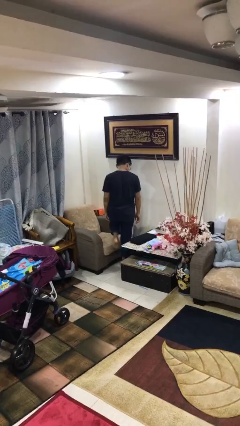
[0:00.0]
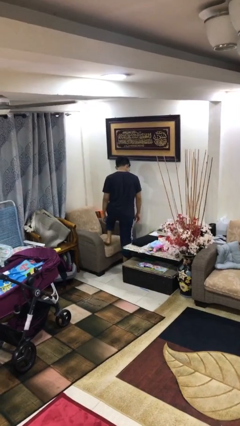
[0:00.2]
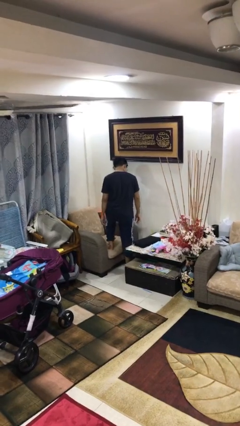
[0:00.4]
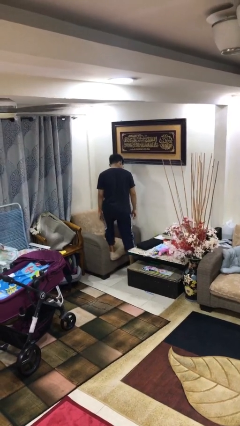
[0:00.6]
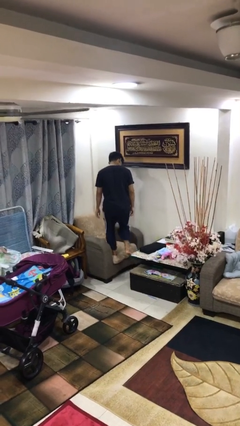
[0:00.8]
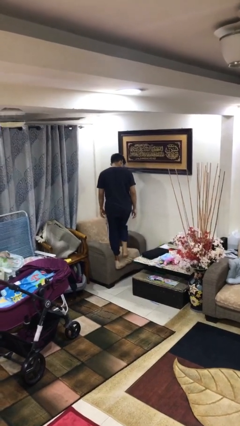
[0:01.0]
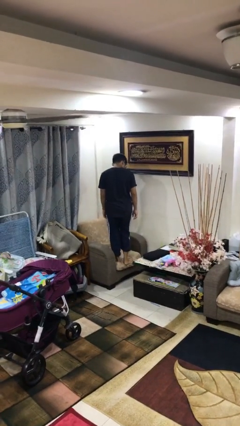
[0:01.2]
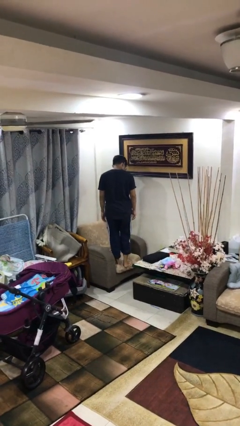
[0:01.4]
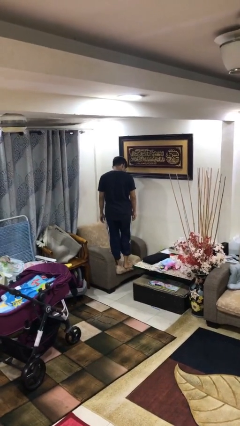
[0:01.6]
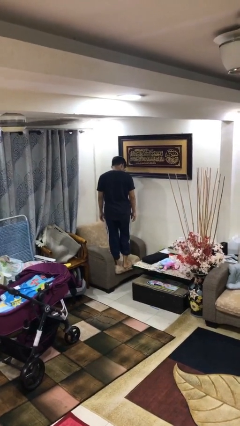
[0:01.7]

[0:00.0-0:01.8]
person climbs on couch

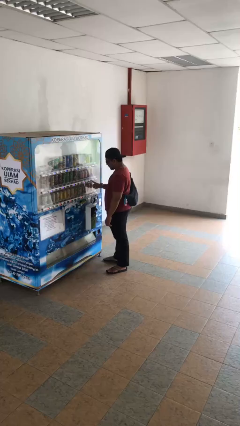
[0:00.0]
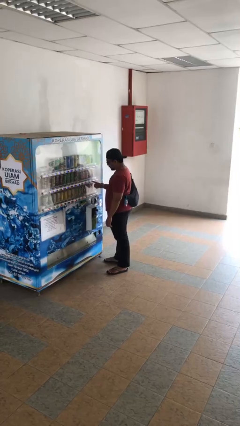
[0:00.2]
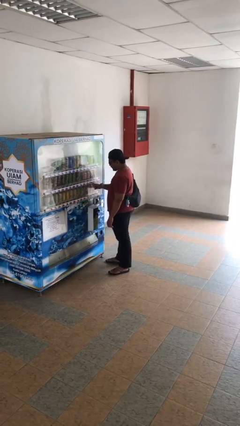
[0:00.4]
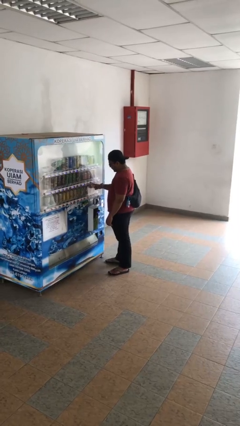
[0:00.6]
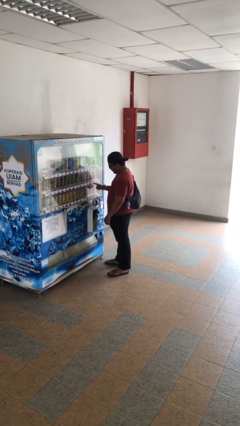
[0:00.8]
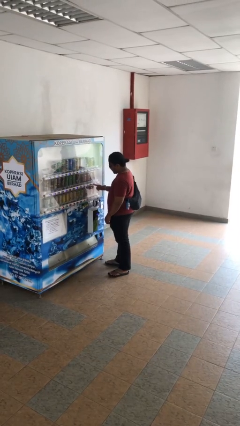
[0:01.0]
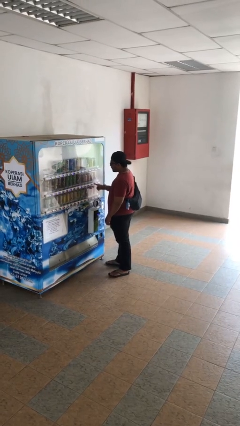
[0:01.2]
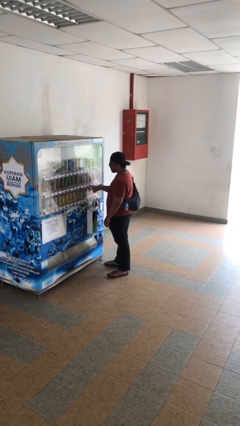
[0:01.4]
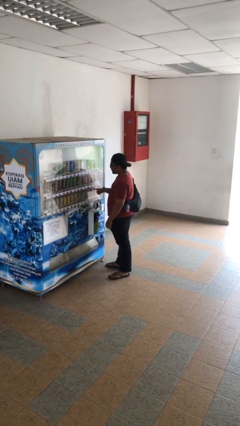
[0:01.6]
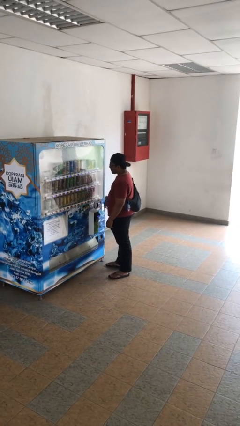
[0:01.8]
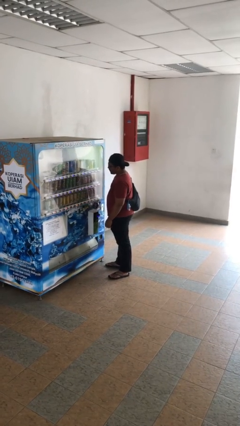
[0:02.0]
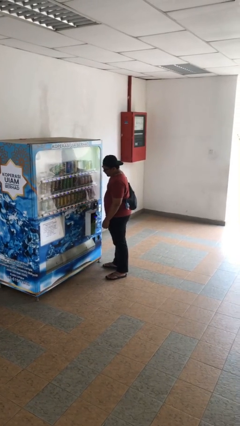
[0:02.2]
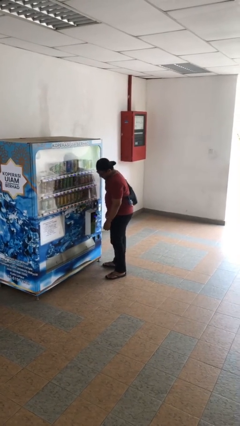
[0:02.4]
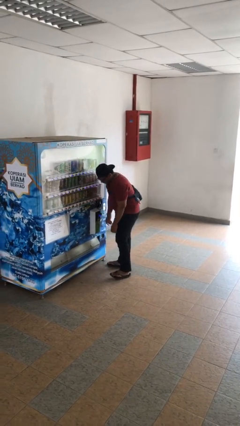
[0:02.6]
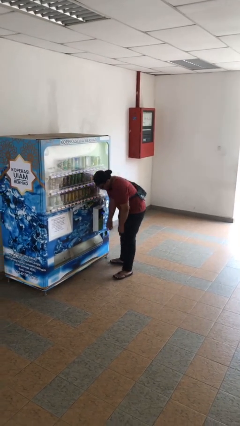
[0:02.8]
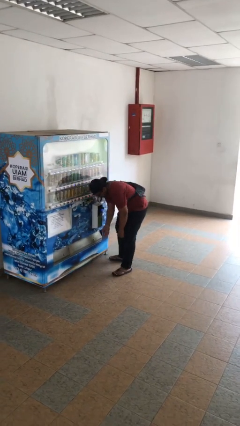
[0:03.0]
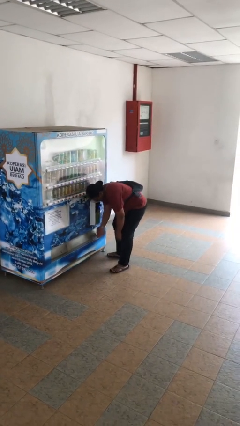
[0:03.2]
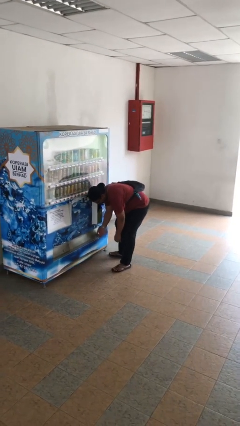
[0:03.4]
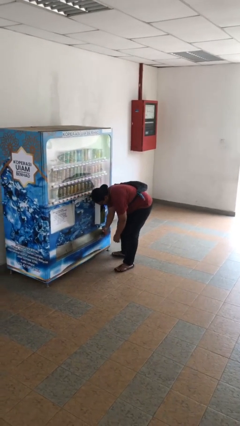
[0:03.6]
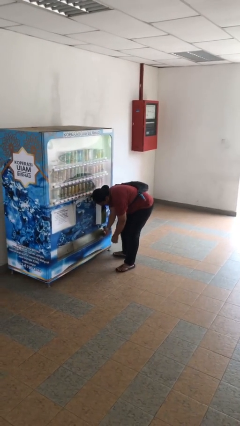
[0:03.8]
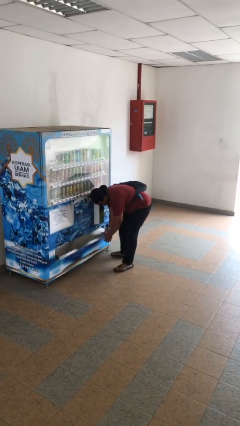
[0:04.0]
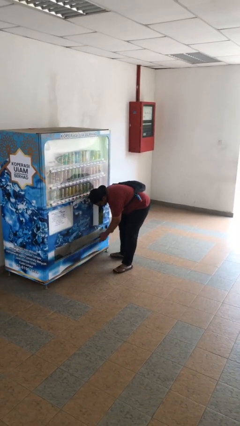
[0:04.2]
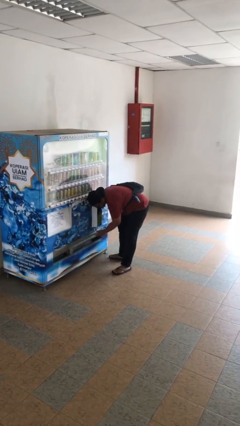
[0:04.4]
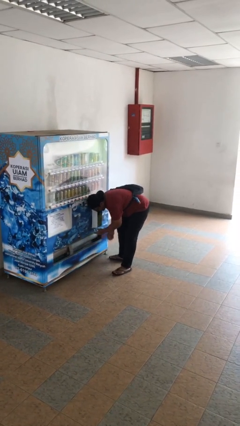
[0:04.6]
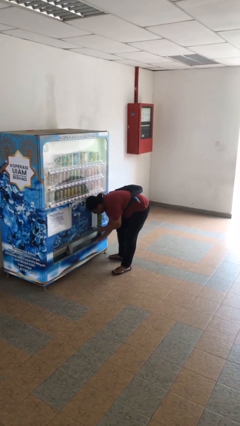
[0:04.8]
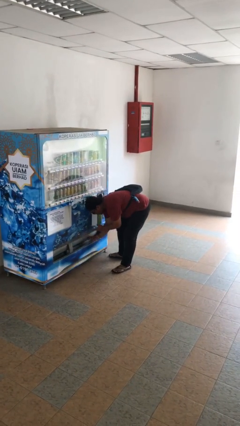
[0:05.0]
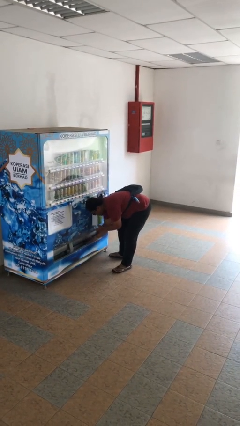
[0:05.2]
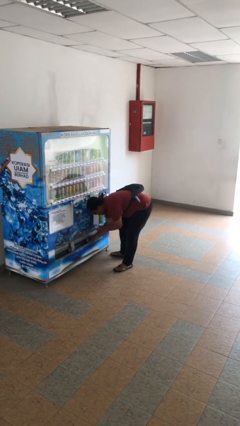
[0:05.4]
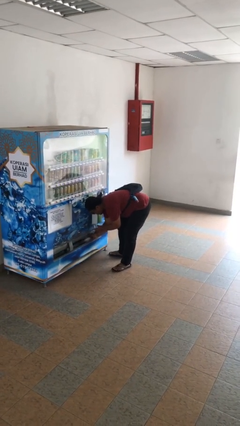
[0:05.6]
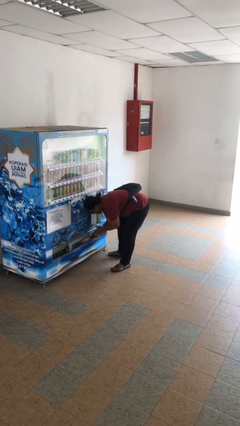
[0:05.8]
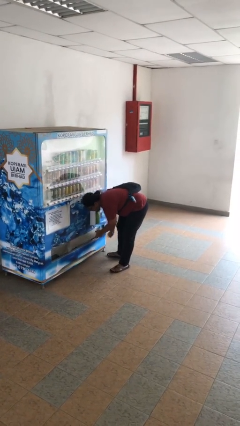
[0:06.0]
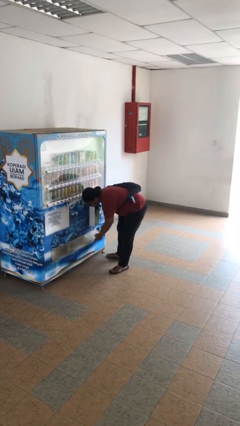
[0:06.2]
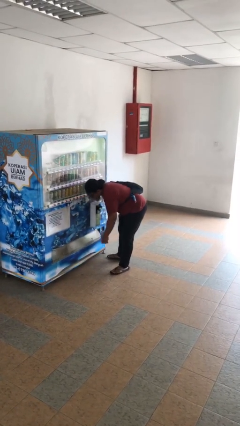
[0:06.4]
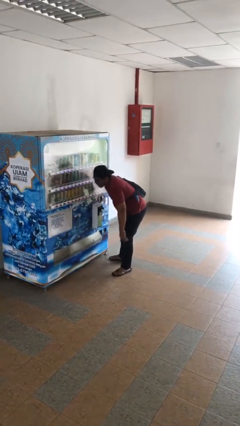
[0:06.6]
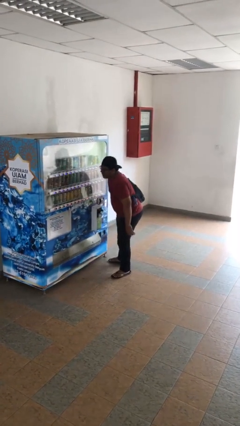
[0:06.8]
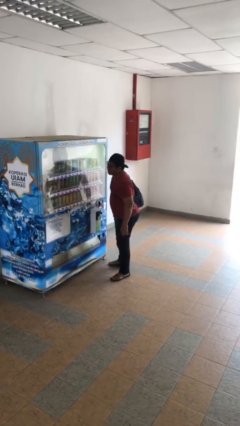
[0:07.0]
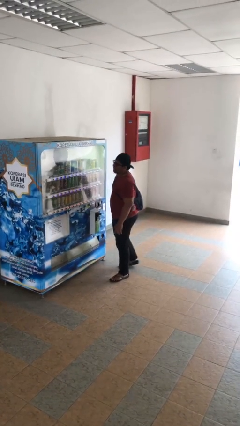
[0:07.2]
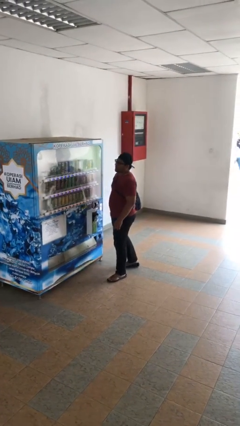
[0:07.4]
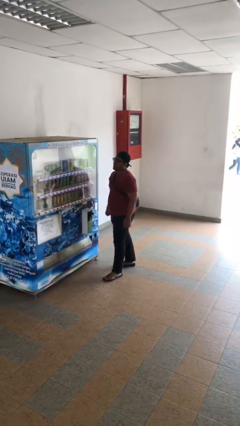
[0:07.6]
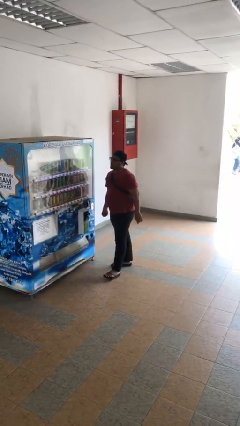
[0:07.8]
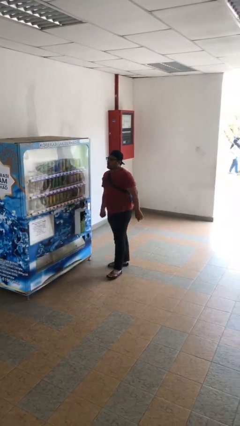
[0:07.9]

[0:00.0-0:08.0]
person purchases from machine

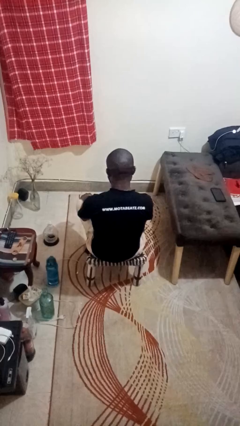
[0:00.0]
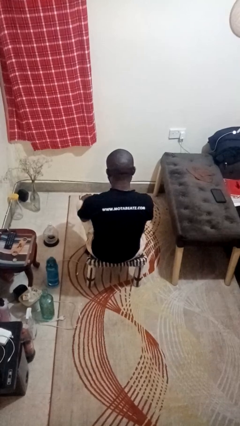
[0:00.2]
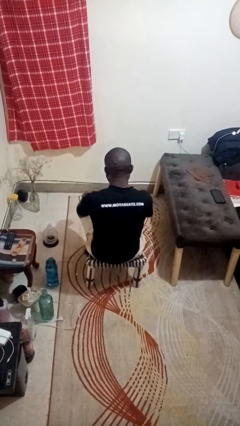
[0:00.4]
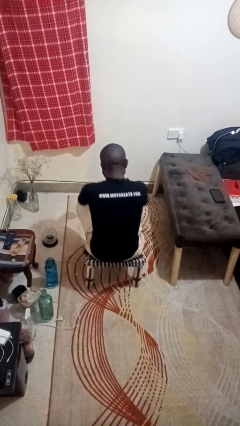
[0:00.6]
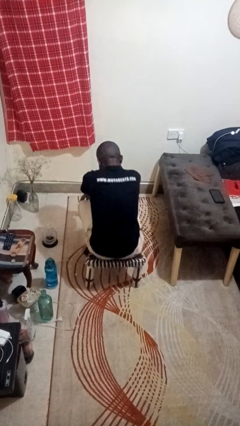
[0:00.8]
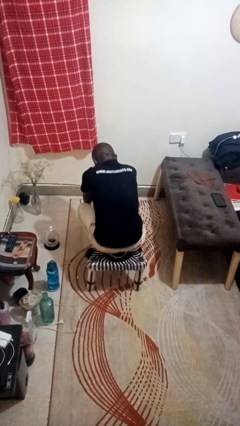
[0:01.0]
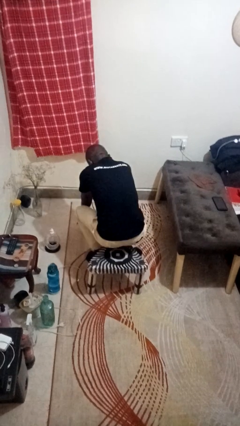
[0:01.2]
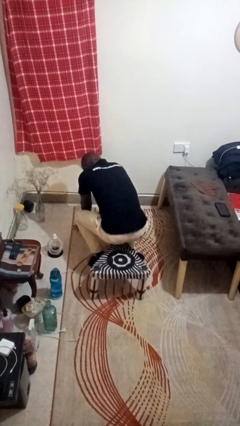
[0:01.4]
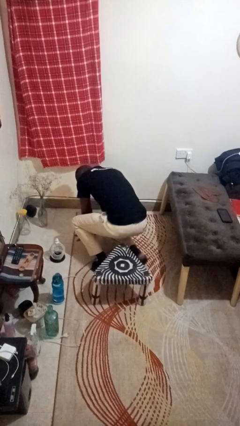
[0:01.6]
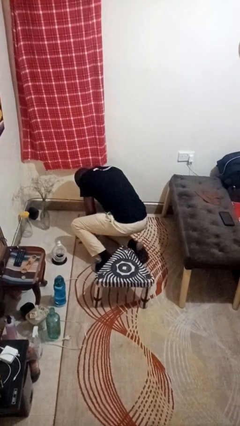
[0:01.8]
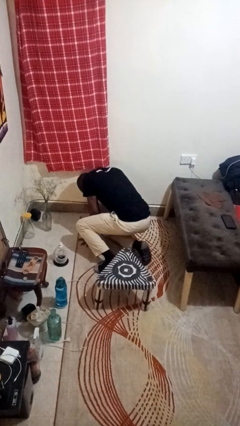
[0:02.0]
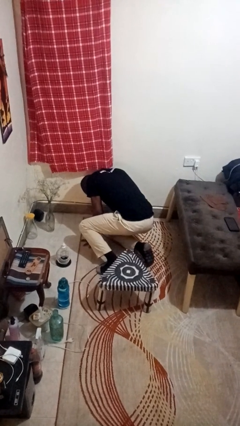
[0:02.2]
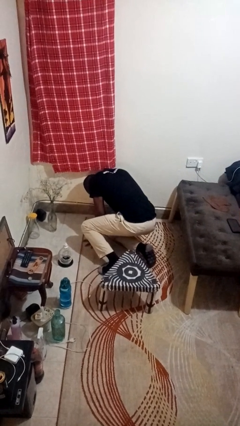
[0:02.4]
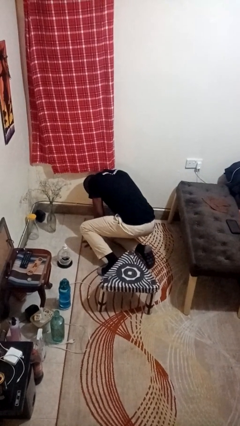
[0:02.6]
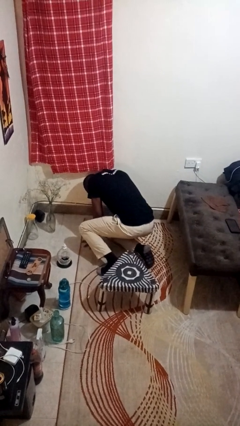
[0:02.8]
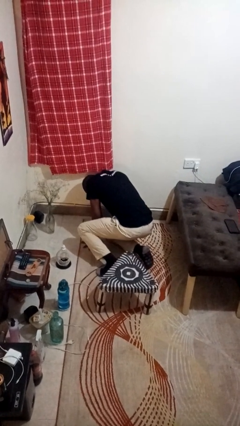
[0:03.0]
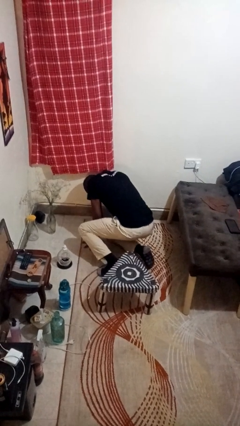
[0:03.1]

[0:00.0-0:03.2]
person falls from chair

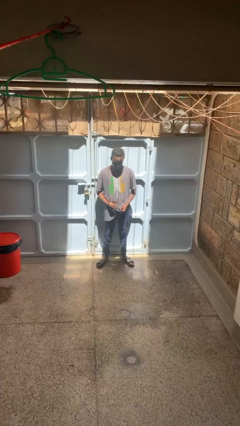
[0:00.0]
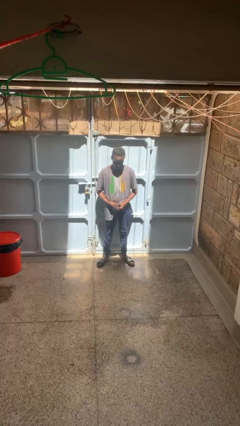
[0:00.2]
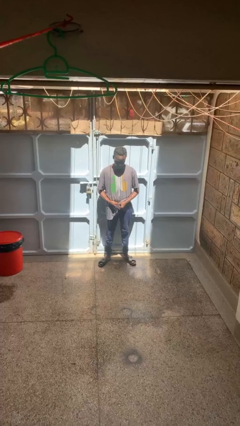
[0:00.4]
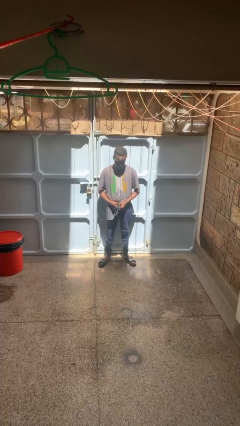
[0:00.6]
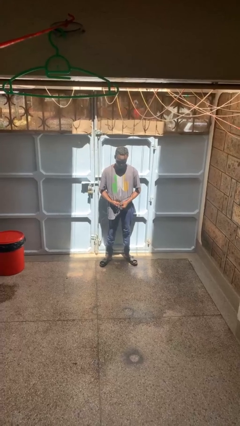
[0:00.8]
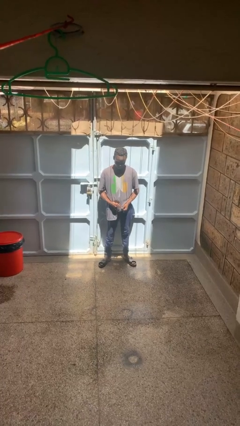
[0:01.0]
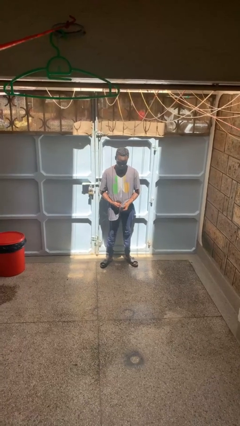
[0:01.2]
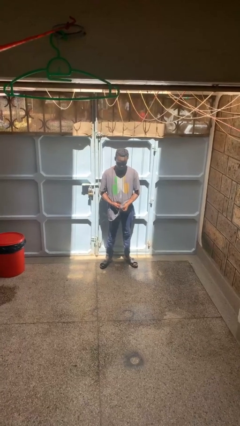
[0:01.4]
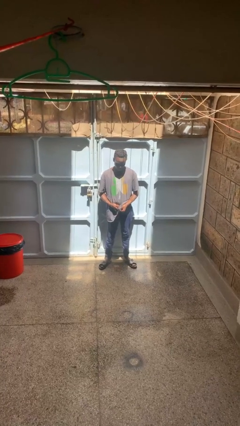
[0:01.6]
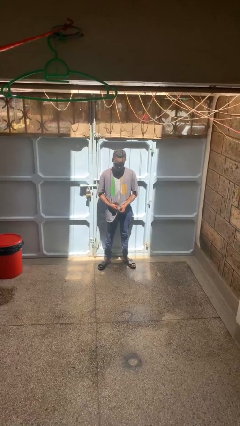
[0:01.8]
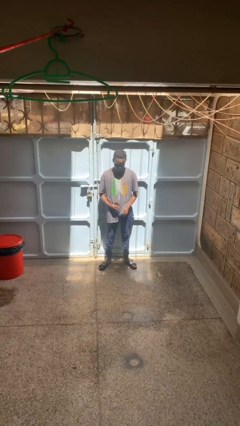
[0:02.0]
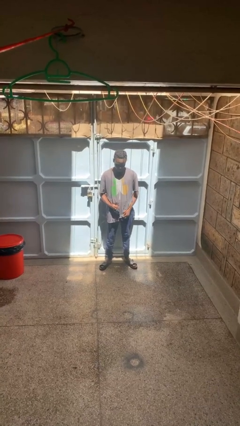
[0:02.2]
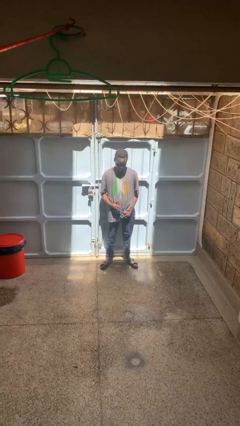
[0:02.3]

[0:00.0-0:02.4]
person cleans eyeglasses

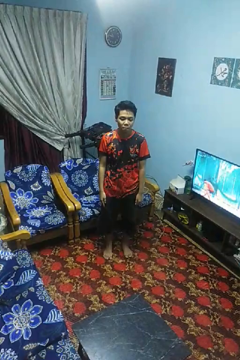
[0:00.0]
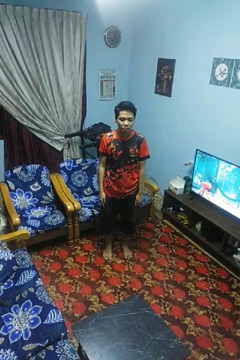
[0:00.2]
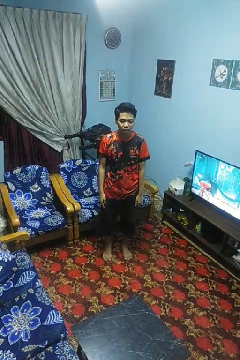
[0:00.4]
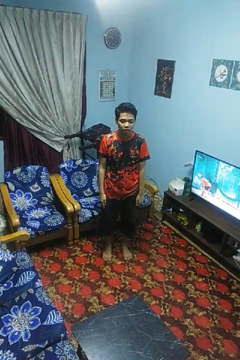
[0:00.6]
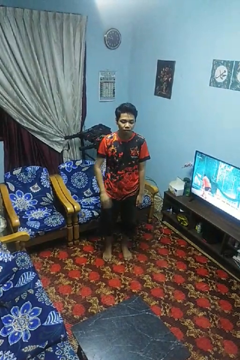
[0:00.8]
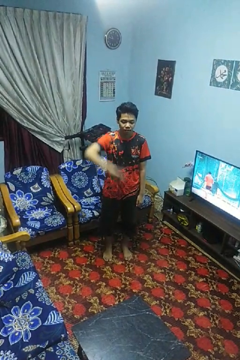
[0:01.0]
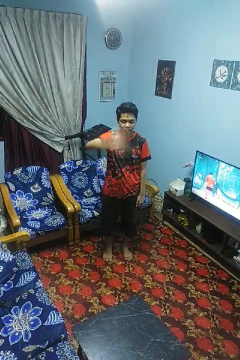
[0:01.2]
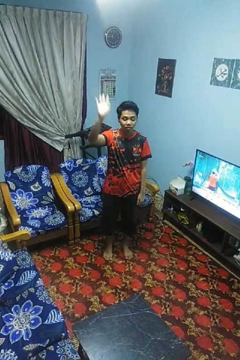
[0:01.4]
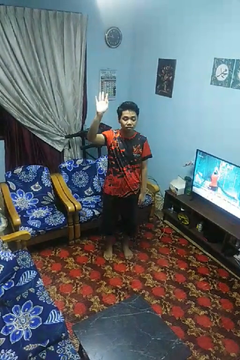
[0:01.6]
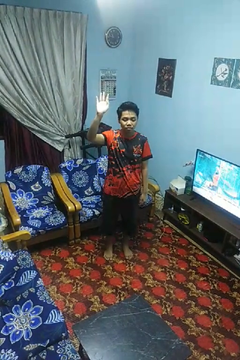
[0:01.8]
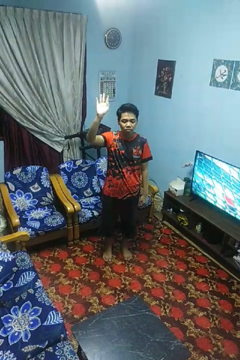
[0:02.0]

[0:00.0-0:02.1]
person gestures swipe up

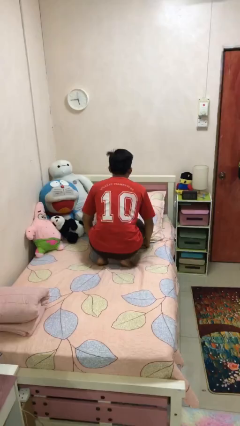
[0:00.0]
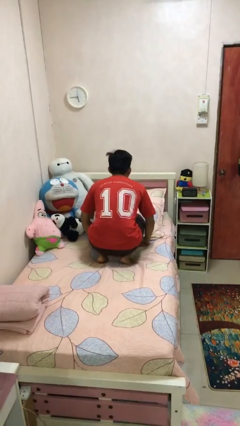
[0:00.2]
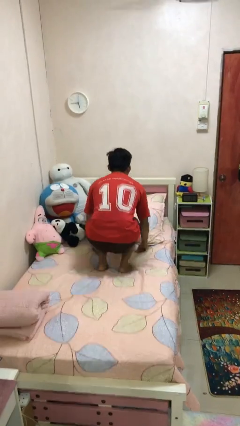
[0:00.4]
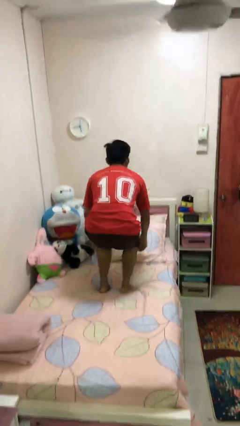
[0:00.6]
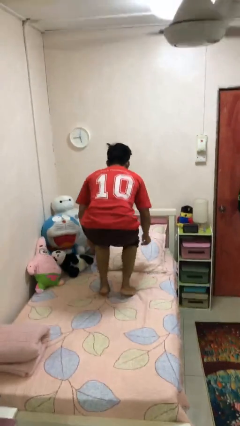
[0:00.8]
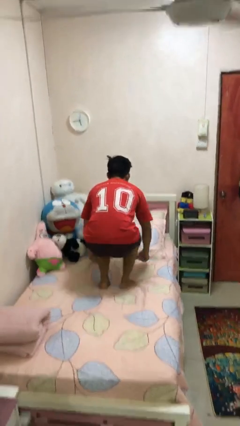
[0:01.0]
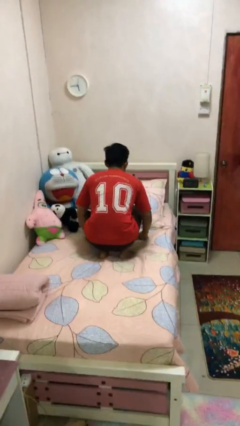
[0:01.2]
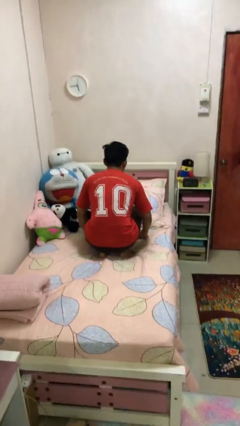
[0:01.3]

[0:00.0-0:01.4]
person jumps on bed
